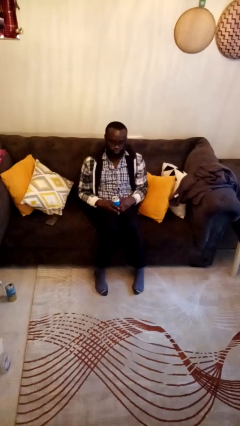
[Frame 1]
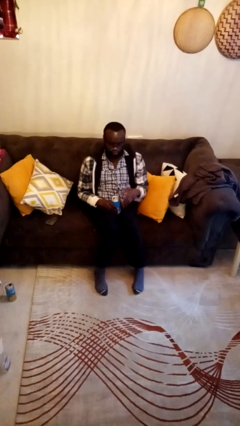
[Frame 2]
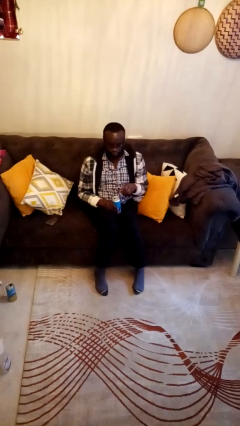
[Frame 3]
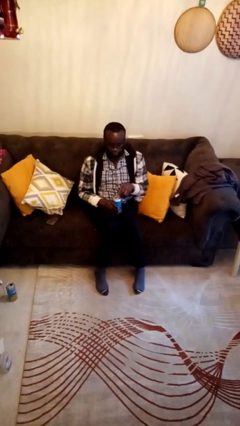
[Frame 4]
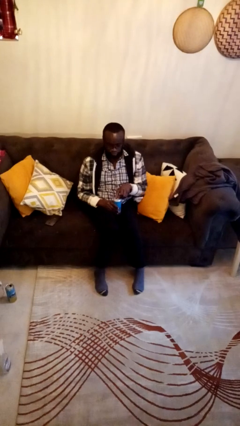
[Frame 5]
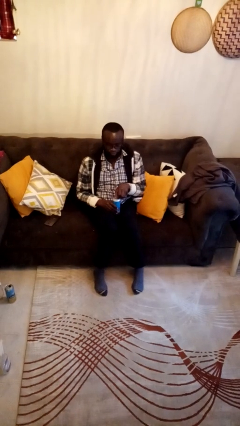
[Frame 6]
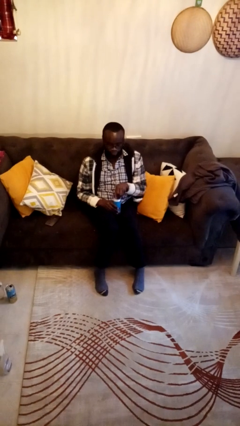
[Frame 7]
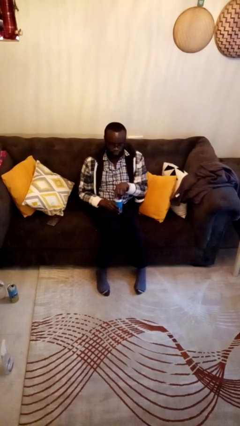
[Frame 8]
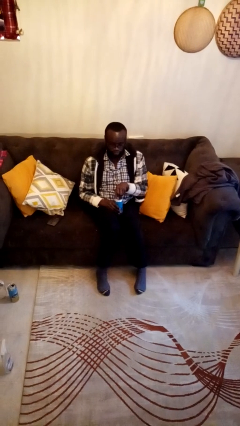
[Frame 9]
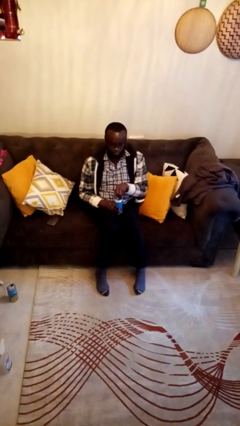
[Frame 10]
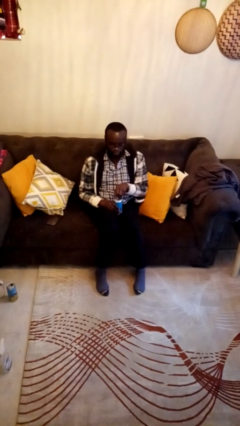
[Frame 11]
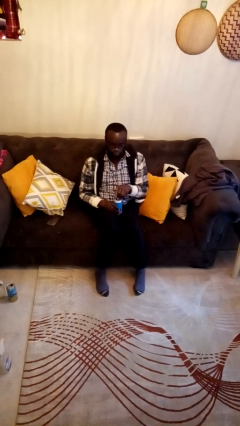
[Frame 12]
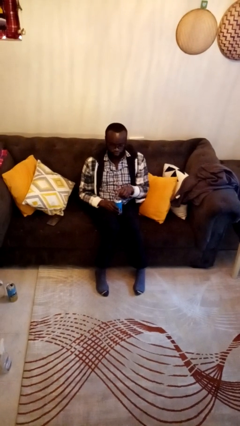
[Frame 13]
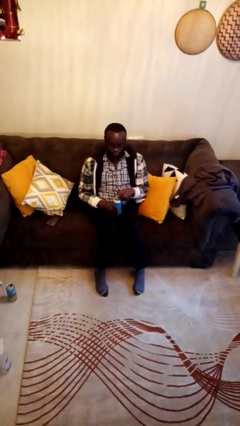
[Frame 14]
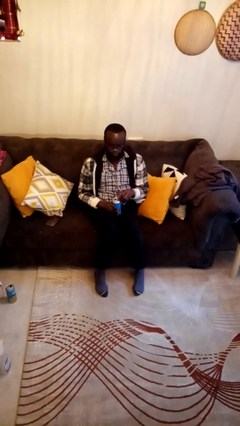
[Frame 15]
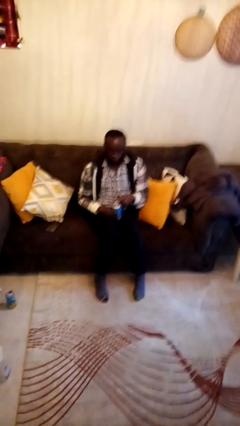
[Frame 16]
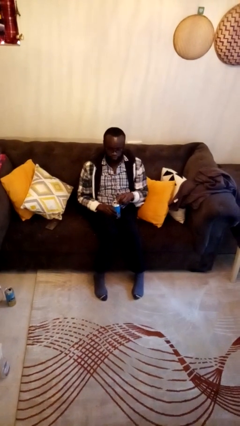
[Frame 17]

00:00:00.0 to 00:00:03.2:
person opens beverage can

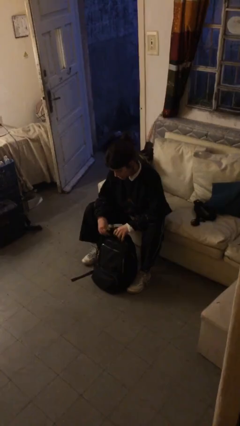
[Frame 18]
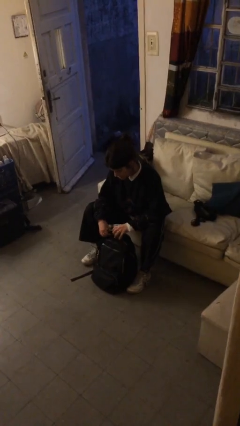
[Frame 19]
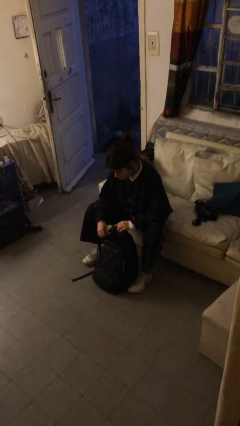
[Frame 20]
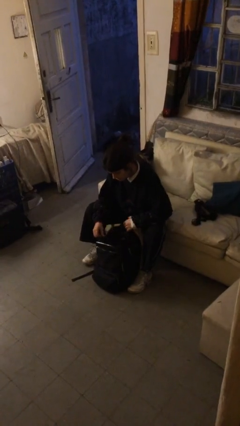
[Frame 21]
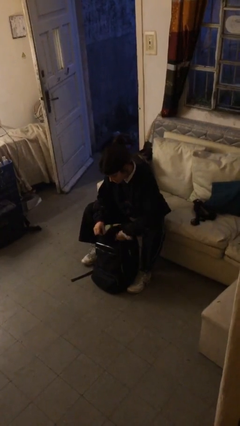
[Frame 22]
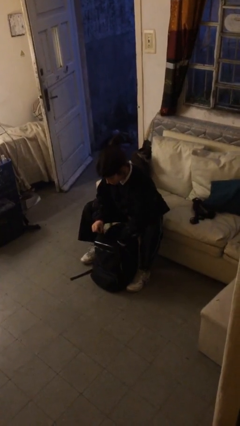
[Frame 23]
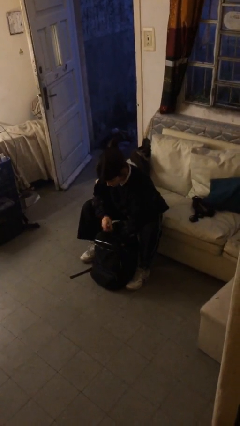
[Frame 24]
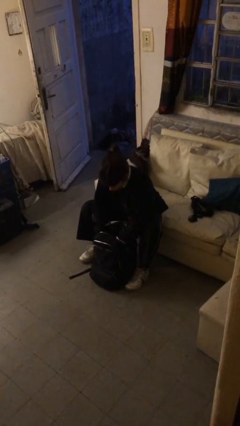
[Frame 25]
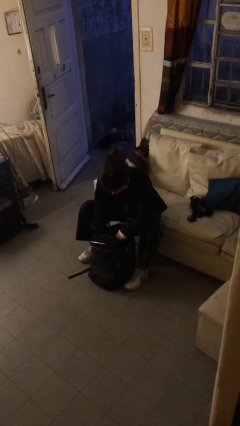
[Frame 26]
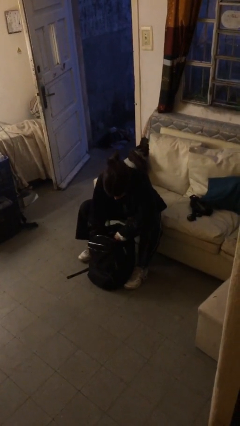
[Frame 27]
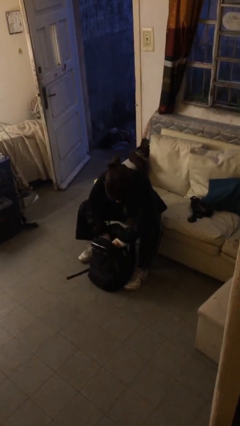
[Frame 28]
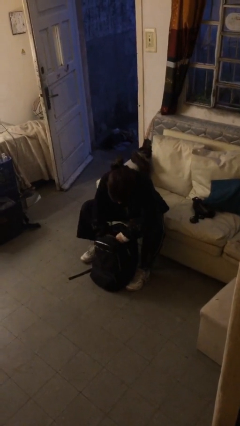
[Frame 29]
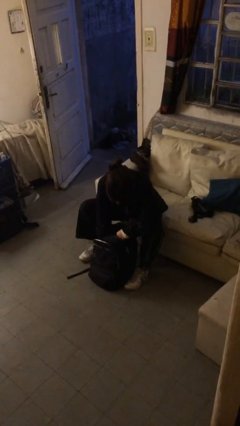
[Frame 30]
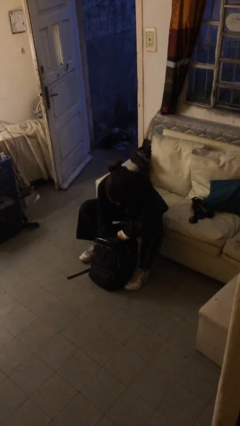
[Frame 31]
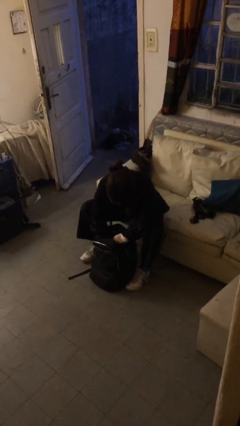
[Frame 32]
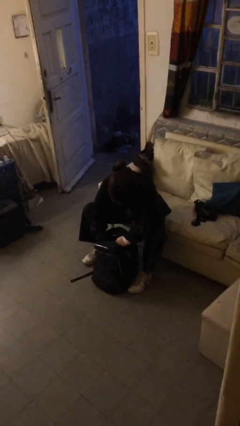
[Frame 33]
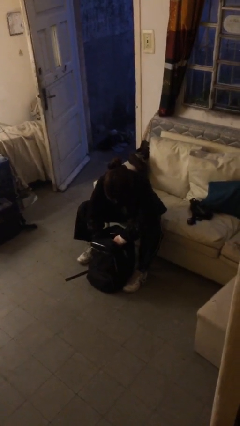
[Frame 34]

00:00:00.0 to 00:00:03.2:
person searches in backpack

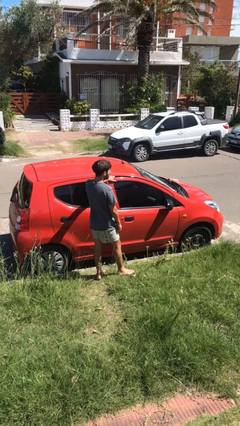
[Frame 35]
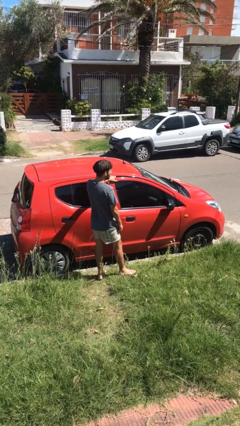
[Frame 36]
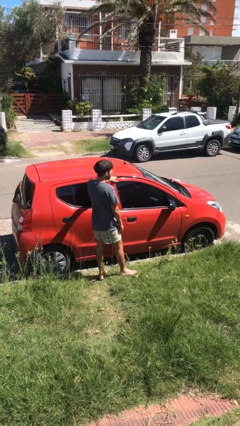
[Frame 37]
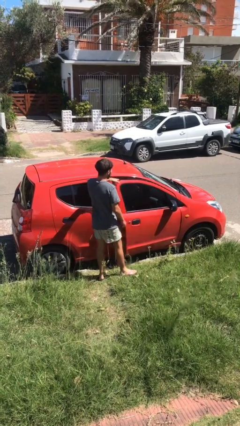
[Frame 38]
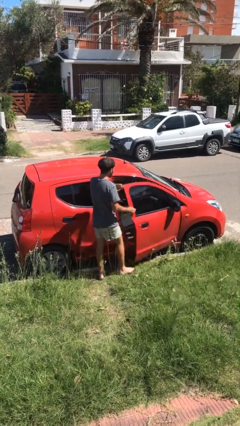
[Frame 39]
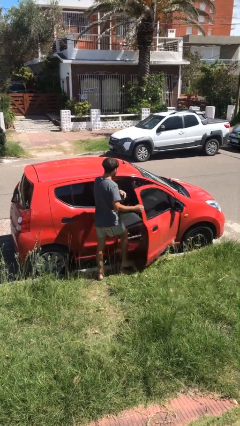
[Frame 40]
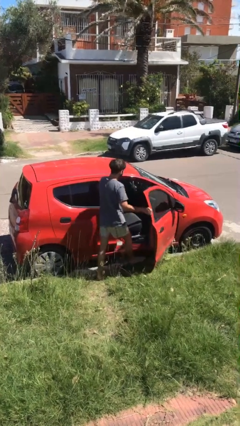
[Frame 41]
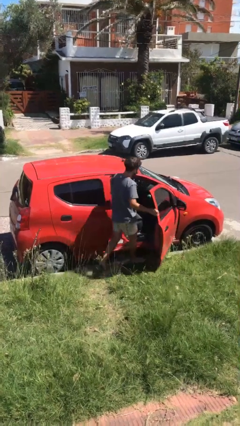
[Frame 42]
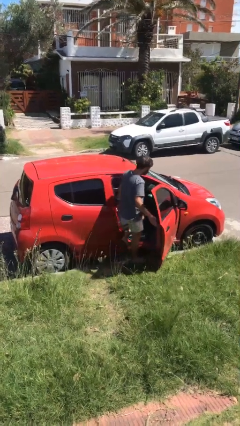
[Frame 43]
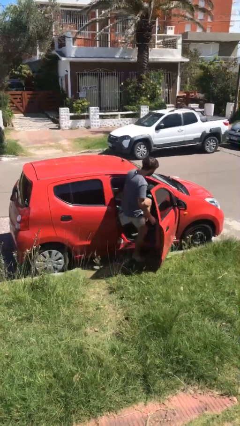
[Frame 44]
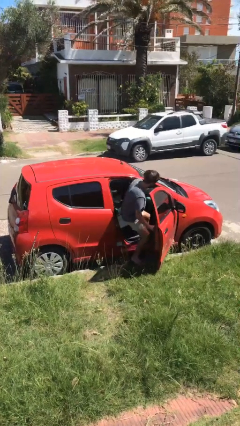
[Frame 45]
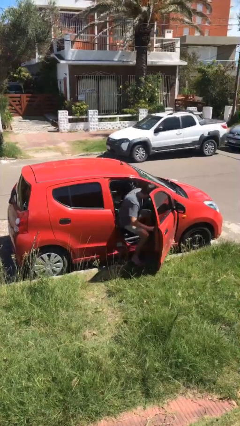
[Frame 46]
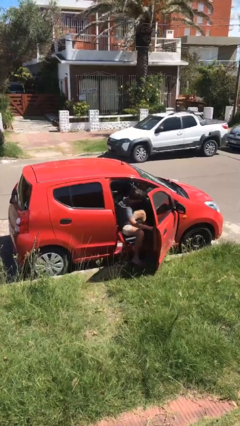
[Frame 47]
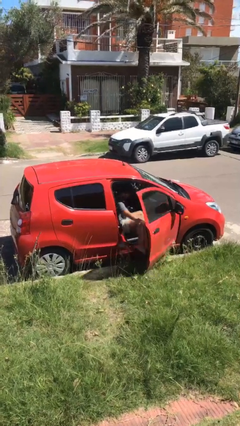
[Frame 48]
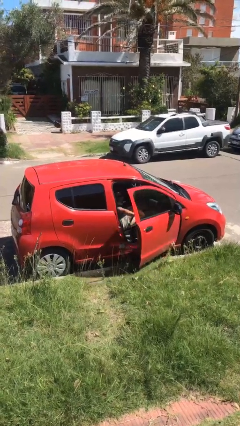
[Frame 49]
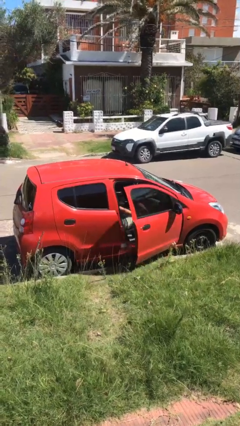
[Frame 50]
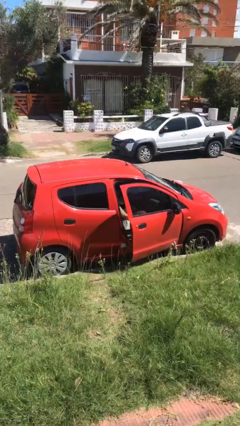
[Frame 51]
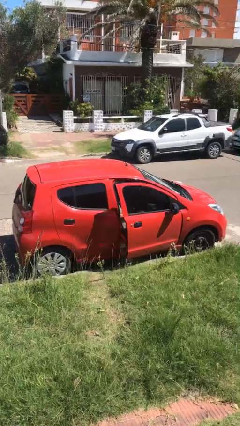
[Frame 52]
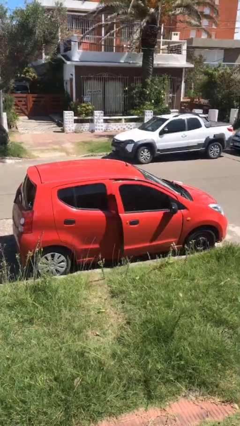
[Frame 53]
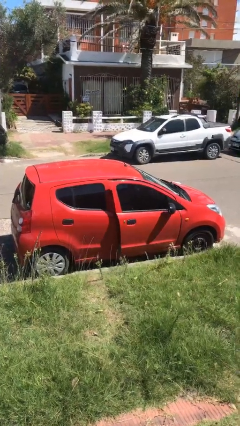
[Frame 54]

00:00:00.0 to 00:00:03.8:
car picks up person

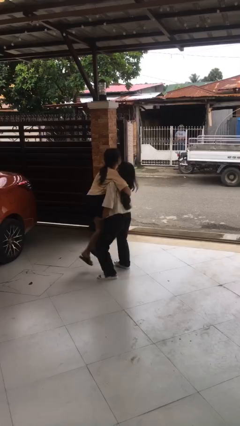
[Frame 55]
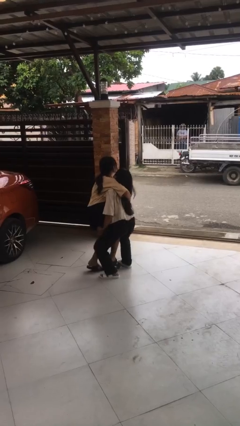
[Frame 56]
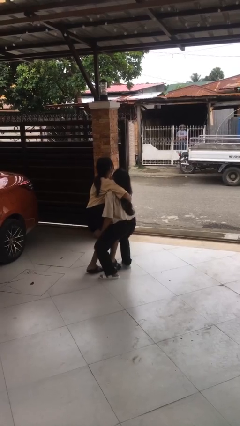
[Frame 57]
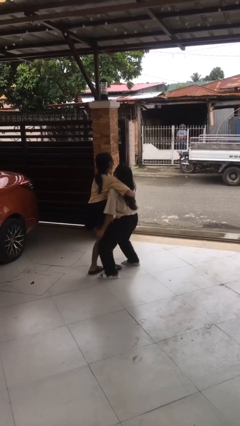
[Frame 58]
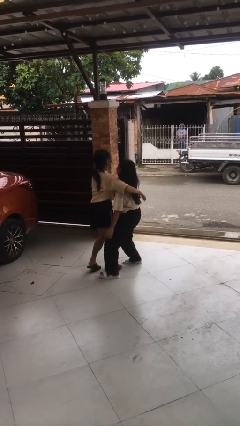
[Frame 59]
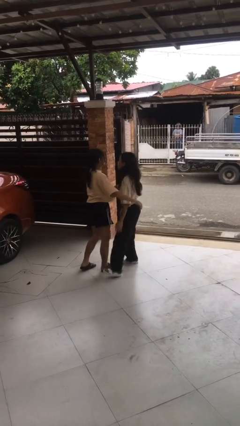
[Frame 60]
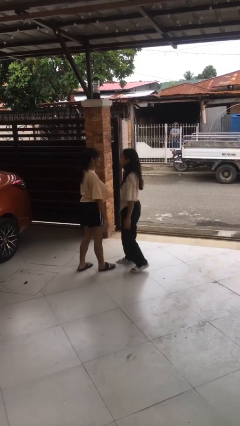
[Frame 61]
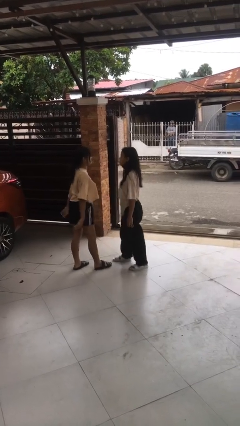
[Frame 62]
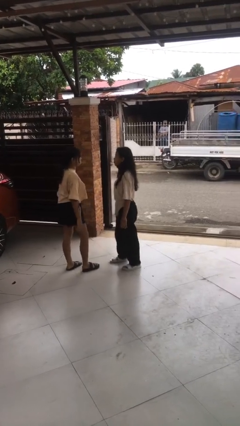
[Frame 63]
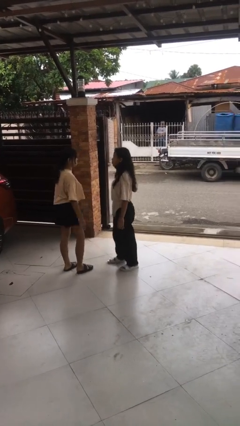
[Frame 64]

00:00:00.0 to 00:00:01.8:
person puts down person

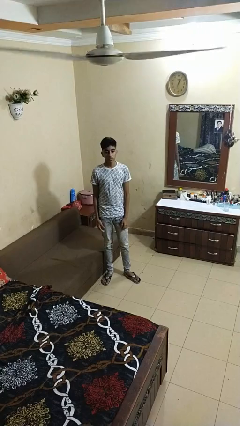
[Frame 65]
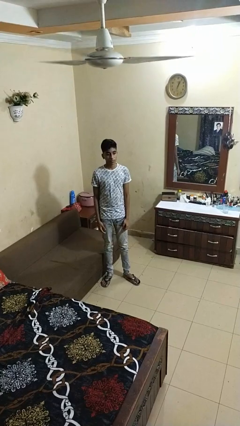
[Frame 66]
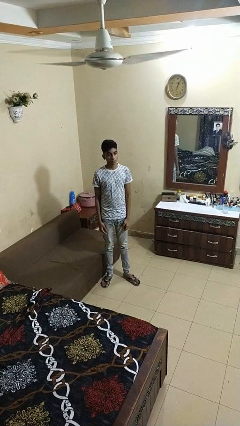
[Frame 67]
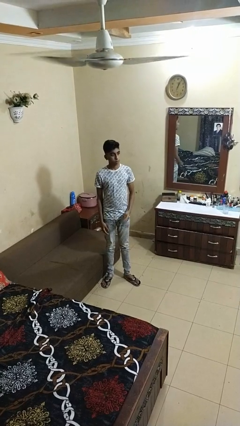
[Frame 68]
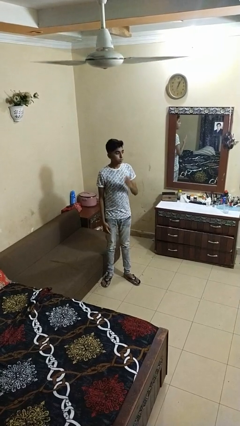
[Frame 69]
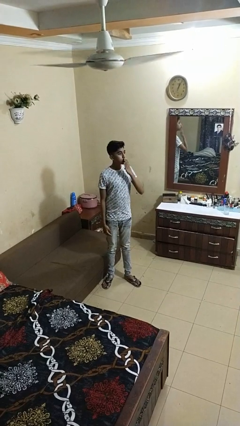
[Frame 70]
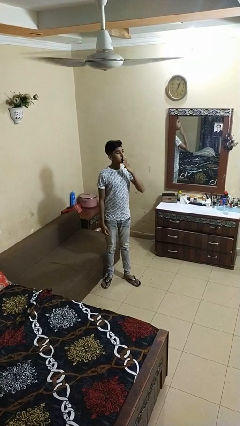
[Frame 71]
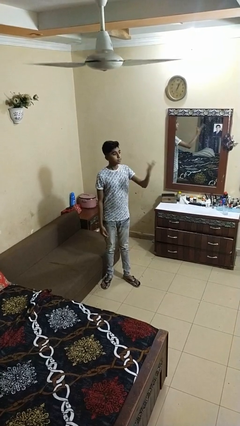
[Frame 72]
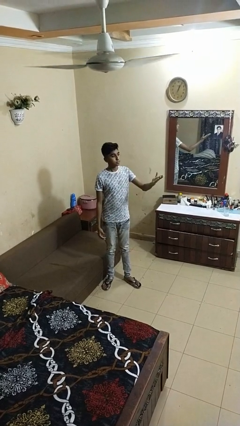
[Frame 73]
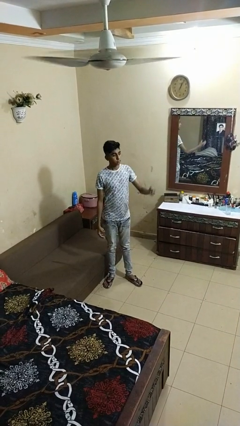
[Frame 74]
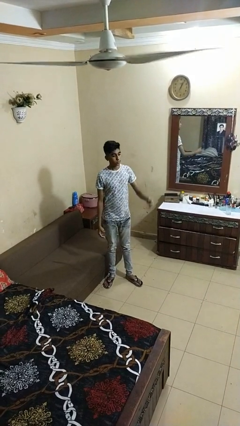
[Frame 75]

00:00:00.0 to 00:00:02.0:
person gestures blow kiss

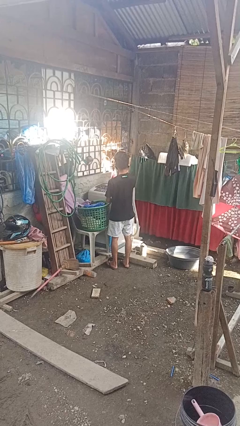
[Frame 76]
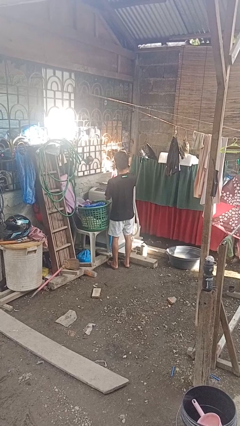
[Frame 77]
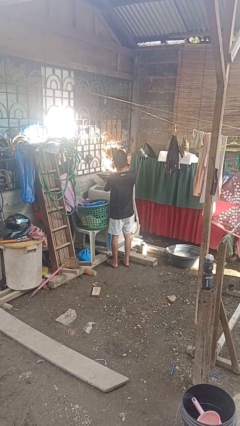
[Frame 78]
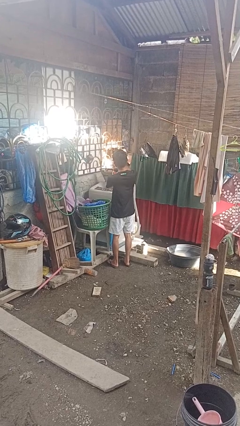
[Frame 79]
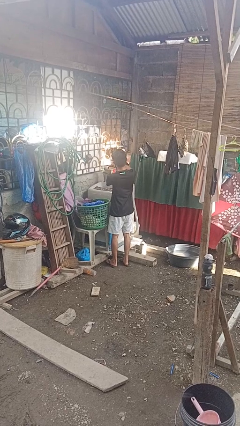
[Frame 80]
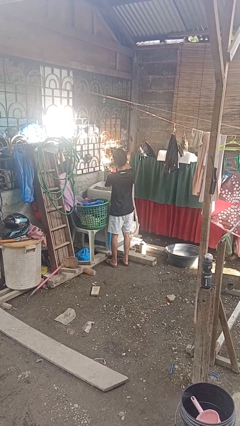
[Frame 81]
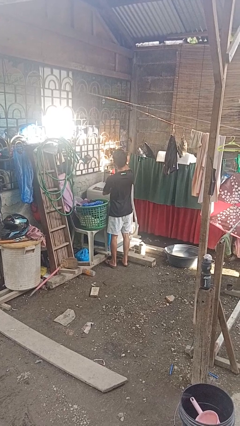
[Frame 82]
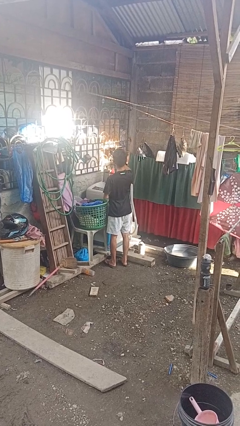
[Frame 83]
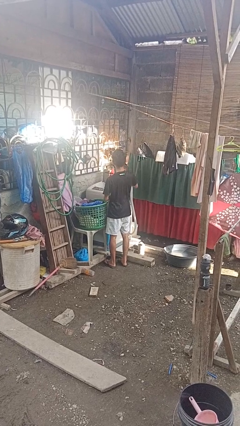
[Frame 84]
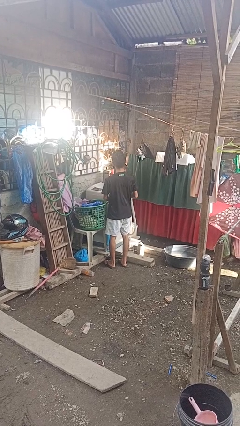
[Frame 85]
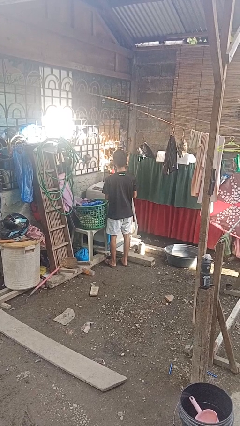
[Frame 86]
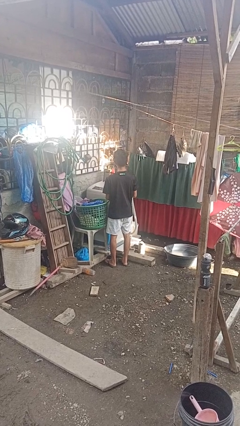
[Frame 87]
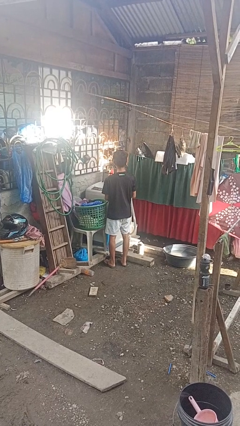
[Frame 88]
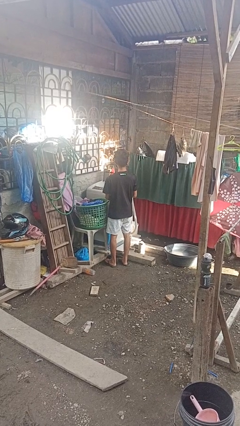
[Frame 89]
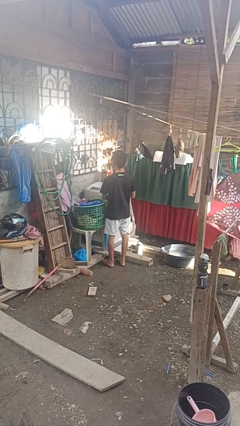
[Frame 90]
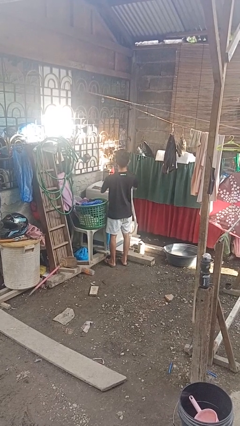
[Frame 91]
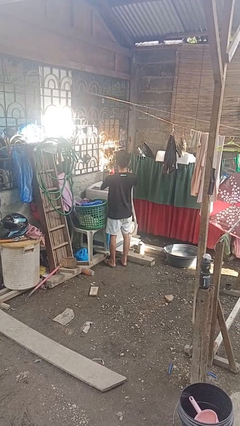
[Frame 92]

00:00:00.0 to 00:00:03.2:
person opens clothes washer
